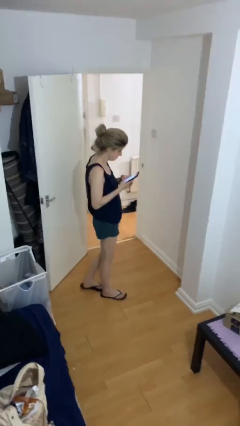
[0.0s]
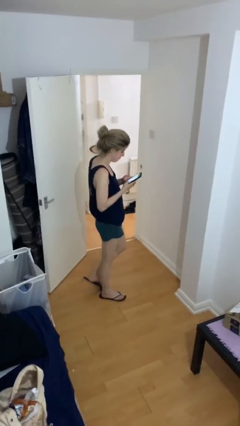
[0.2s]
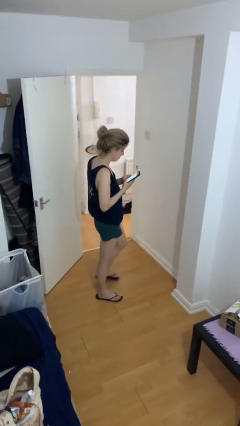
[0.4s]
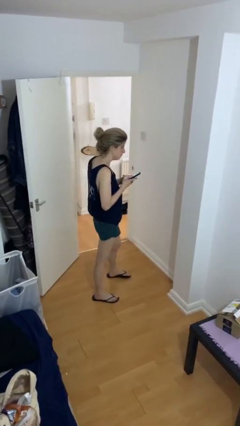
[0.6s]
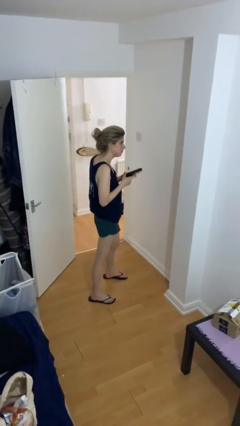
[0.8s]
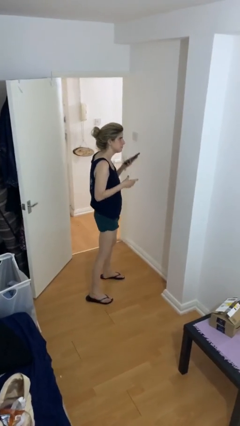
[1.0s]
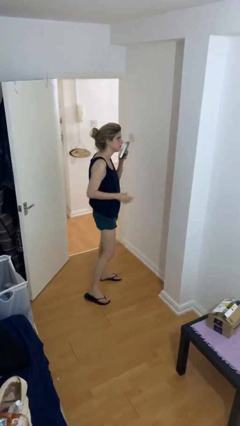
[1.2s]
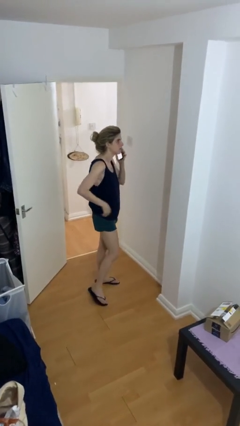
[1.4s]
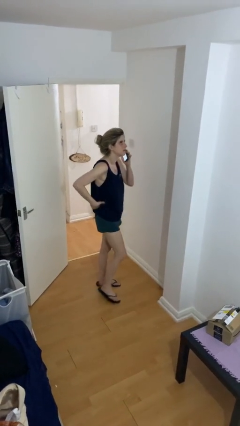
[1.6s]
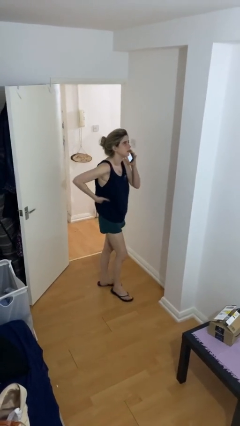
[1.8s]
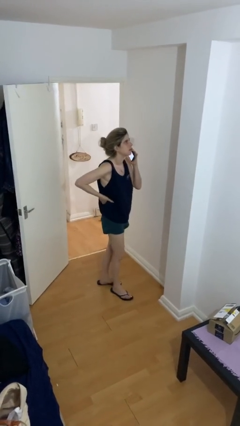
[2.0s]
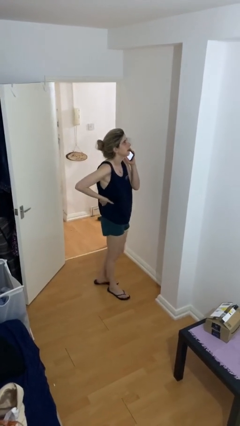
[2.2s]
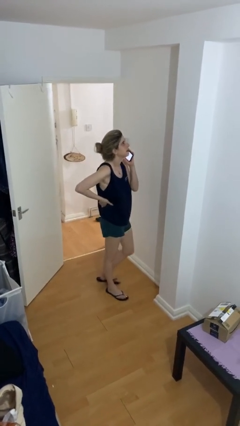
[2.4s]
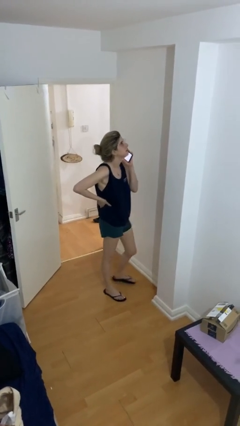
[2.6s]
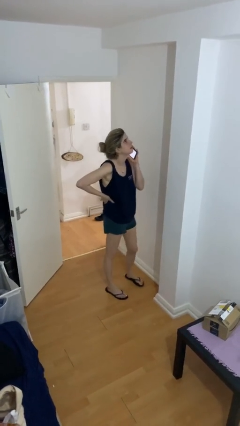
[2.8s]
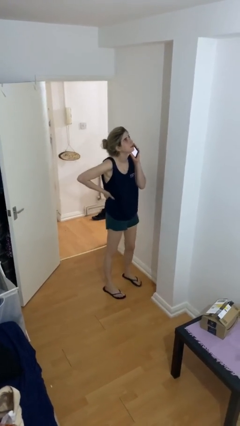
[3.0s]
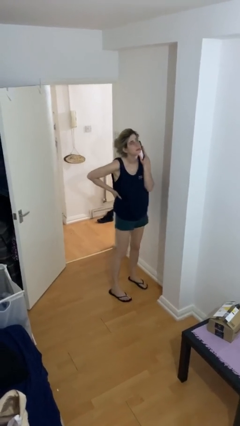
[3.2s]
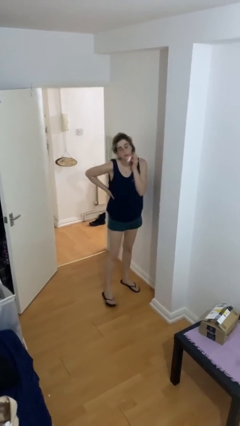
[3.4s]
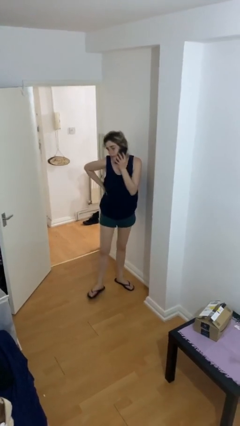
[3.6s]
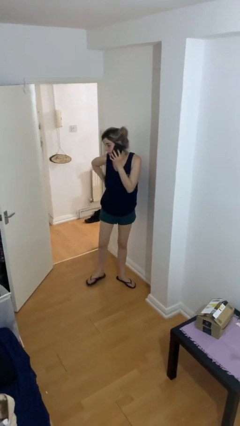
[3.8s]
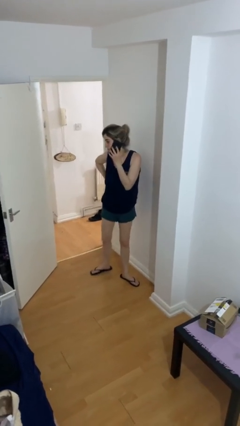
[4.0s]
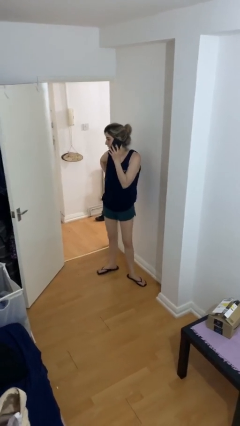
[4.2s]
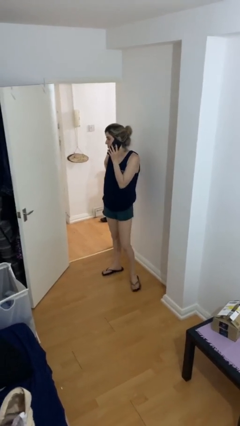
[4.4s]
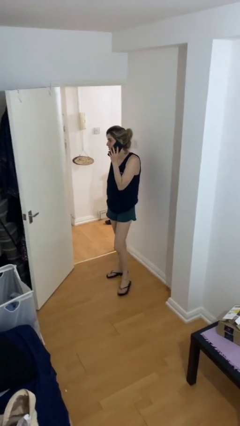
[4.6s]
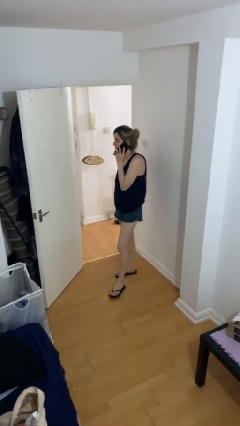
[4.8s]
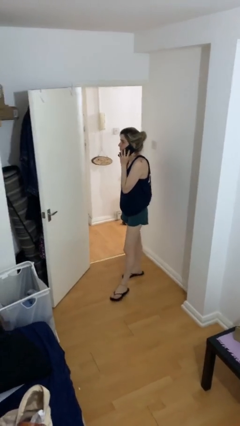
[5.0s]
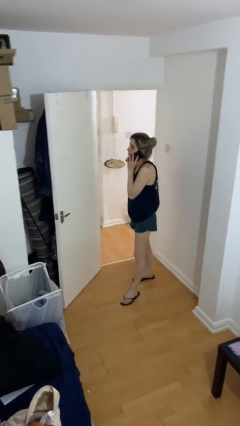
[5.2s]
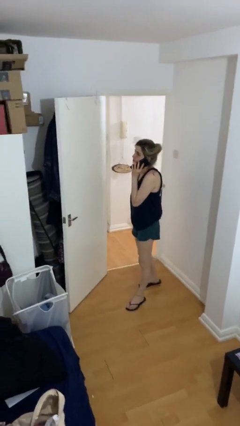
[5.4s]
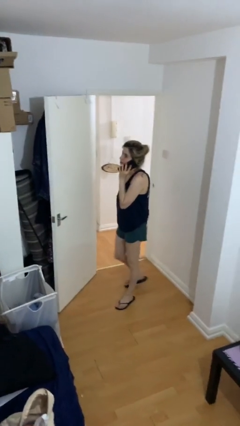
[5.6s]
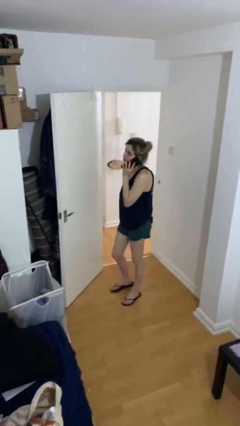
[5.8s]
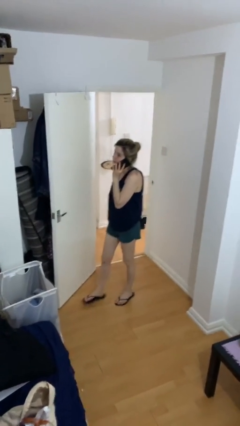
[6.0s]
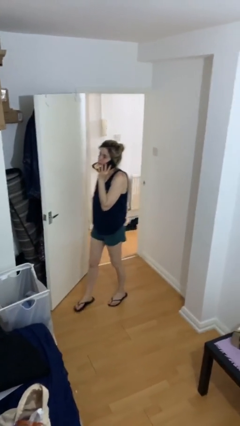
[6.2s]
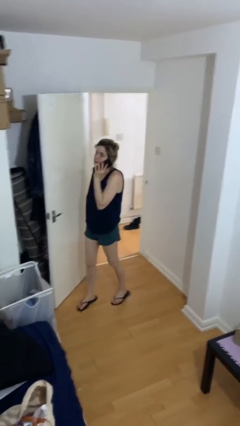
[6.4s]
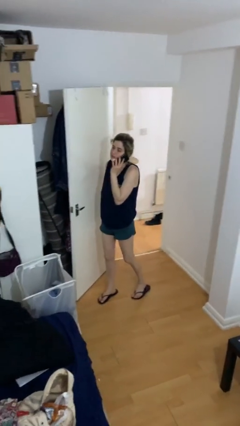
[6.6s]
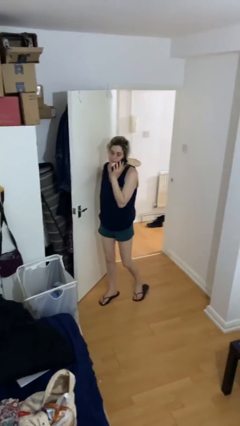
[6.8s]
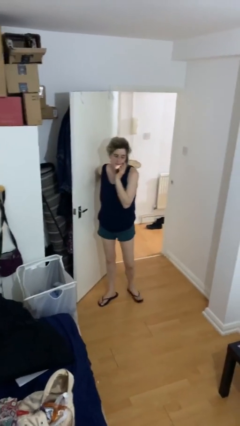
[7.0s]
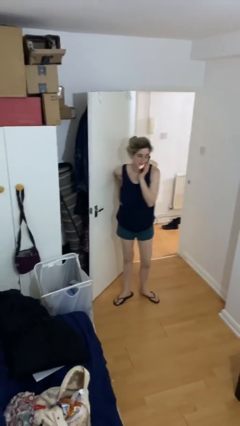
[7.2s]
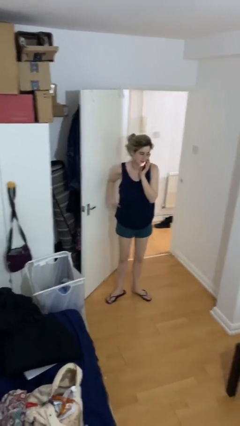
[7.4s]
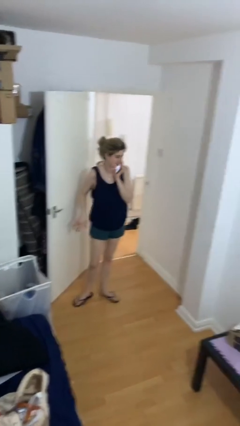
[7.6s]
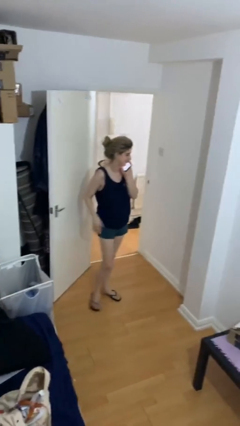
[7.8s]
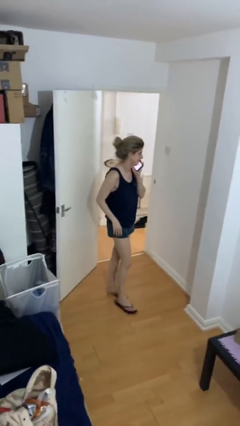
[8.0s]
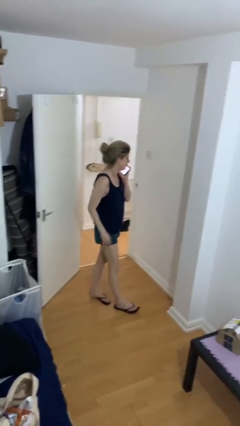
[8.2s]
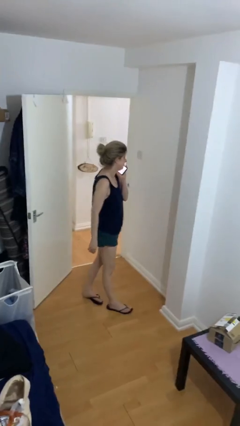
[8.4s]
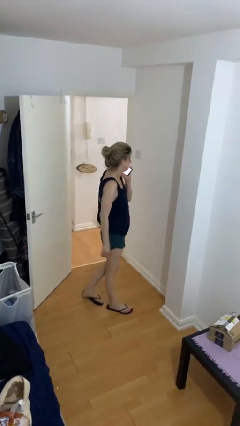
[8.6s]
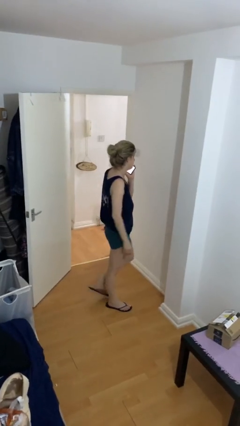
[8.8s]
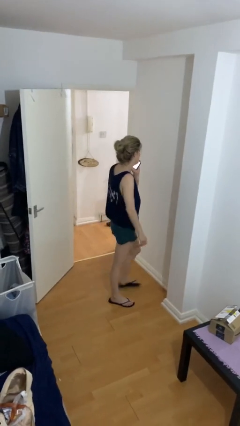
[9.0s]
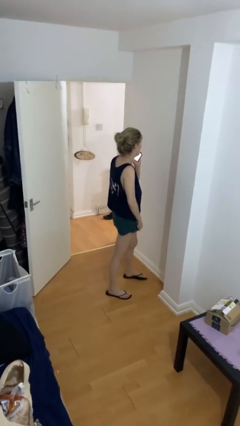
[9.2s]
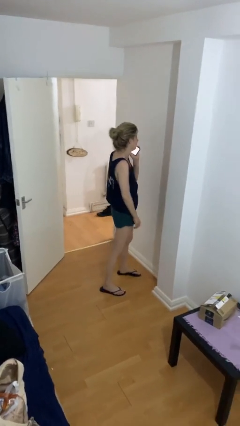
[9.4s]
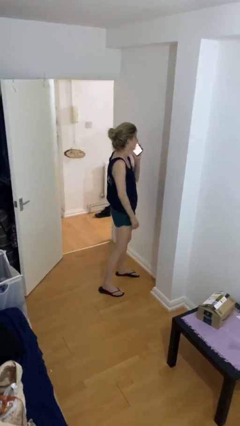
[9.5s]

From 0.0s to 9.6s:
person talks on phone

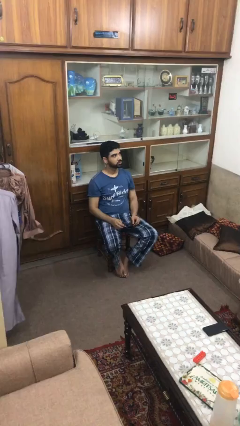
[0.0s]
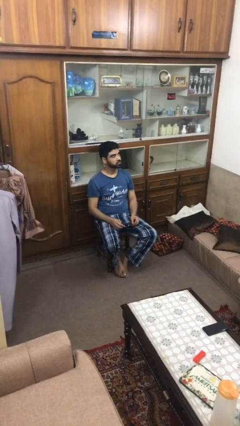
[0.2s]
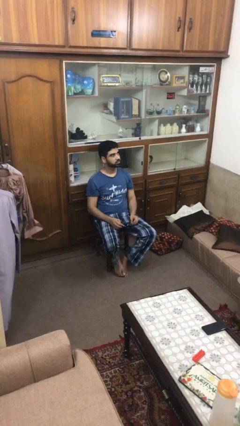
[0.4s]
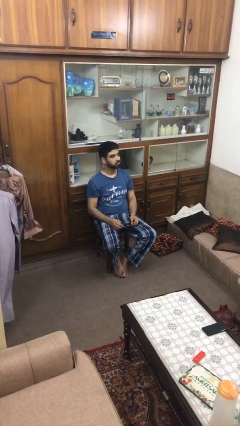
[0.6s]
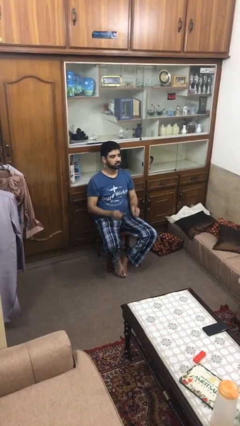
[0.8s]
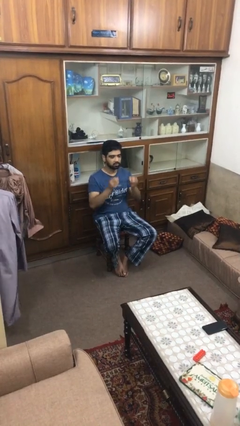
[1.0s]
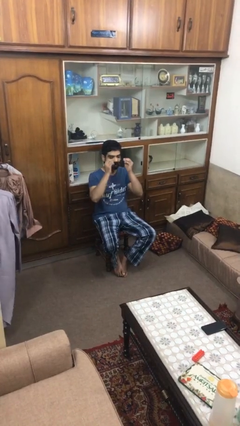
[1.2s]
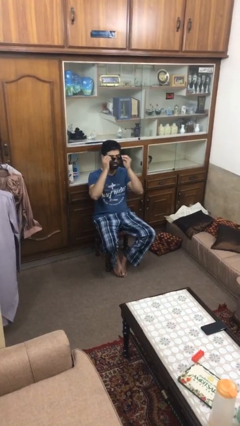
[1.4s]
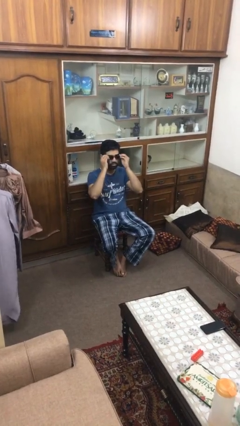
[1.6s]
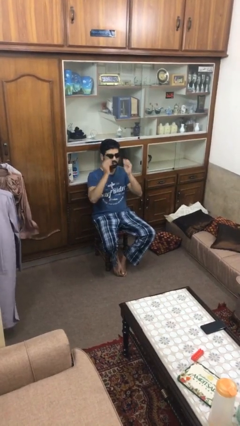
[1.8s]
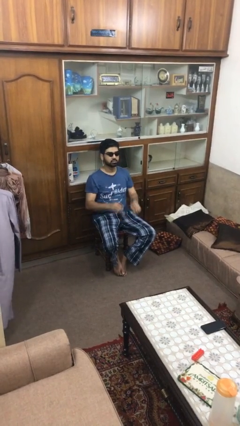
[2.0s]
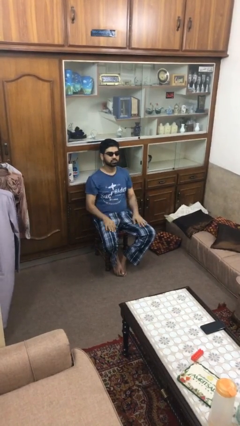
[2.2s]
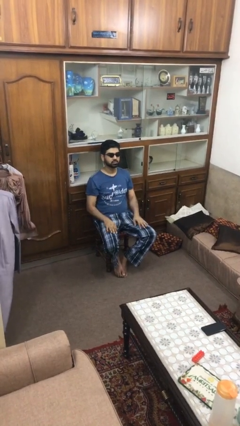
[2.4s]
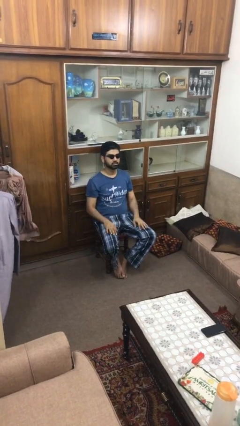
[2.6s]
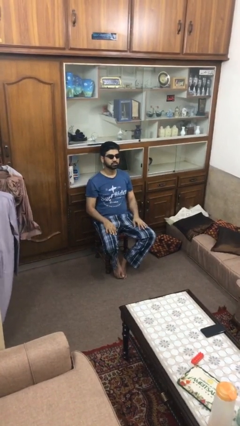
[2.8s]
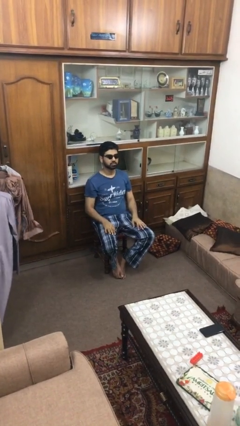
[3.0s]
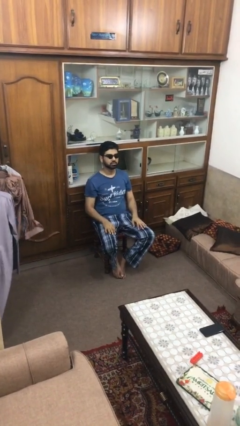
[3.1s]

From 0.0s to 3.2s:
person puts on sunglasses

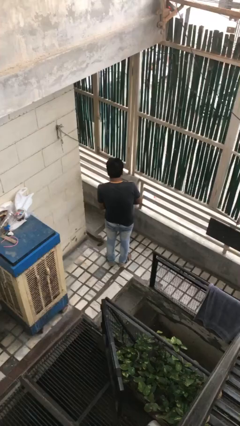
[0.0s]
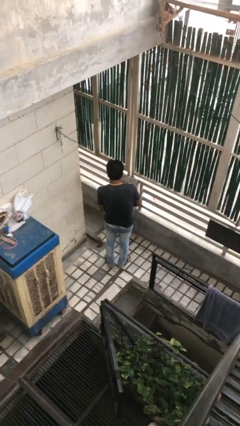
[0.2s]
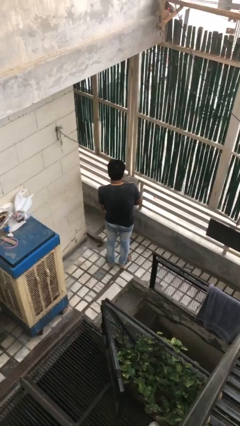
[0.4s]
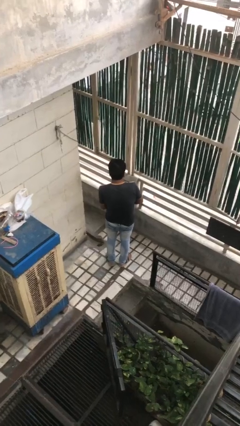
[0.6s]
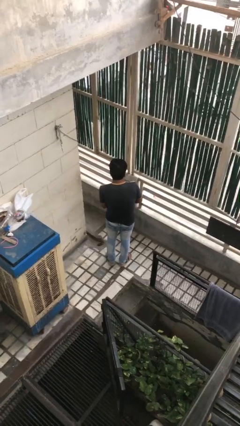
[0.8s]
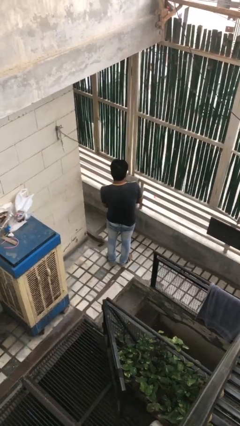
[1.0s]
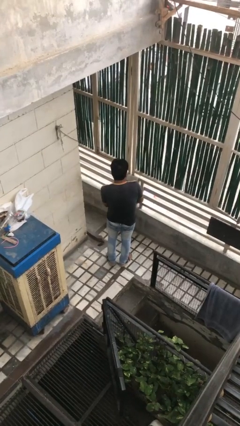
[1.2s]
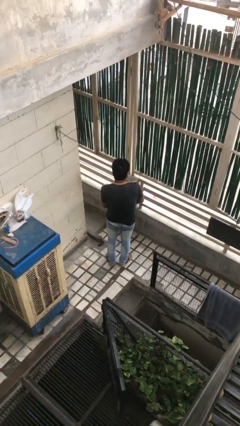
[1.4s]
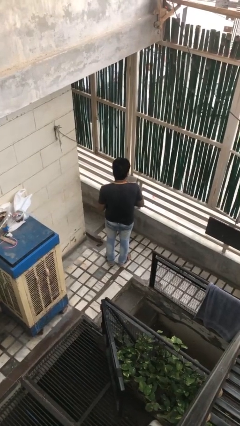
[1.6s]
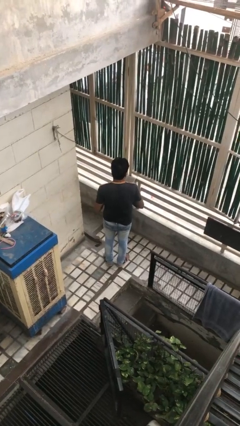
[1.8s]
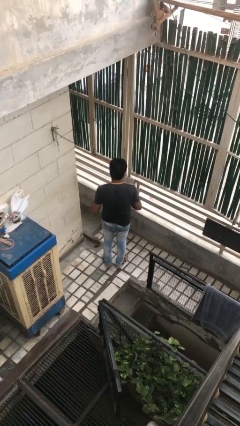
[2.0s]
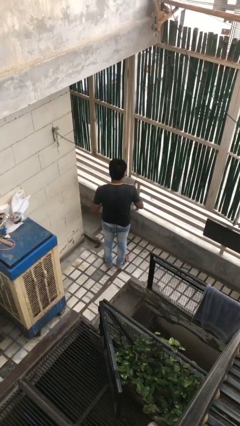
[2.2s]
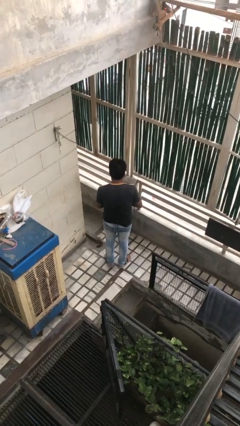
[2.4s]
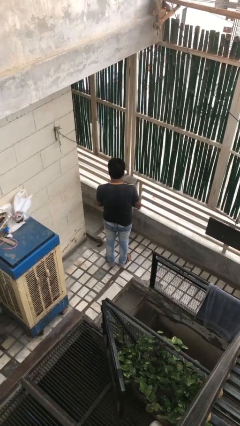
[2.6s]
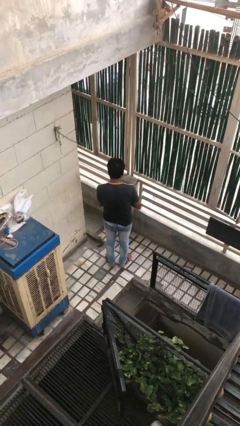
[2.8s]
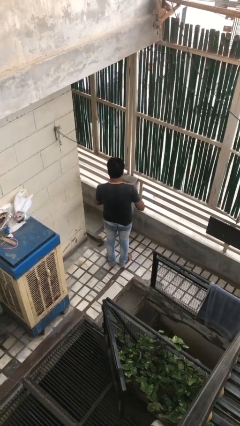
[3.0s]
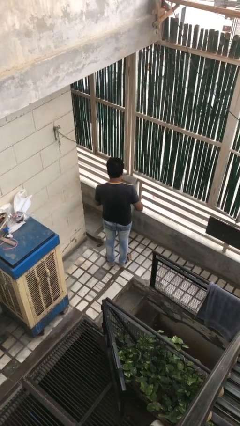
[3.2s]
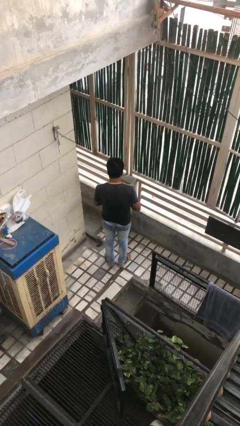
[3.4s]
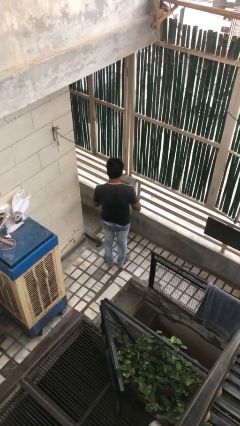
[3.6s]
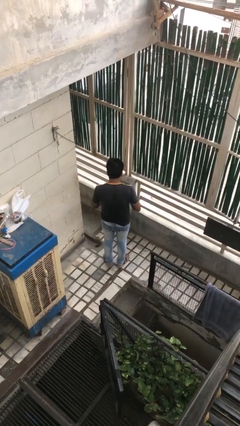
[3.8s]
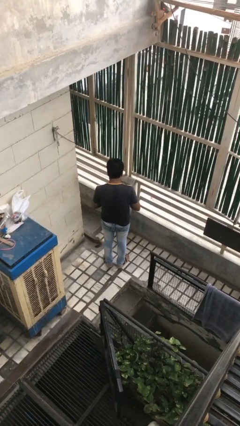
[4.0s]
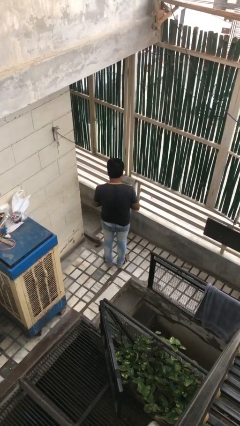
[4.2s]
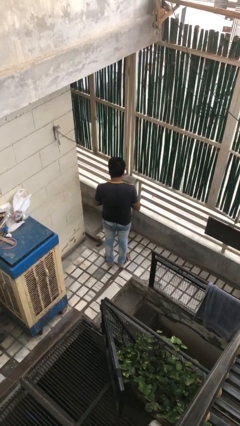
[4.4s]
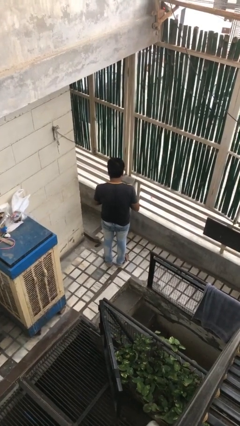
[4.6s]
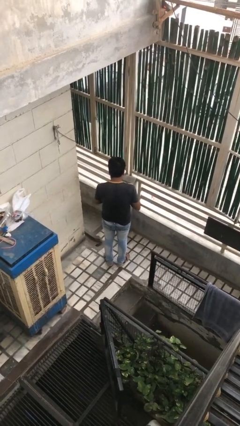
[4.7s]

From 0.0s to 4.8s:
person takes off gloves
